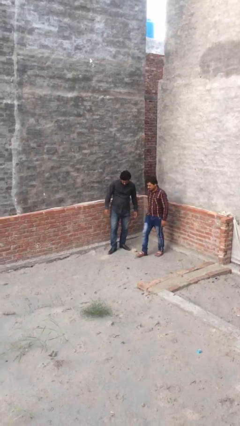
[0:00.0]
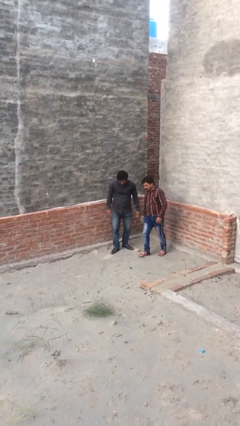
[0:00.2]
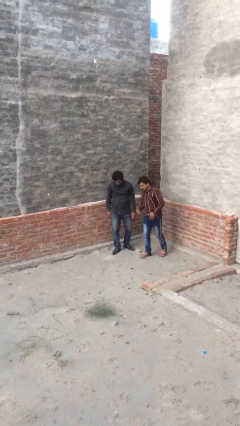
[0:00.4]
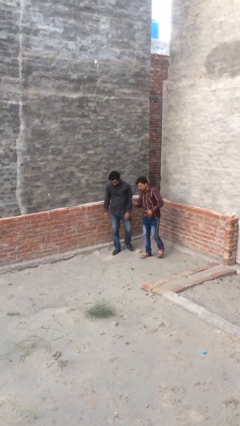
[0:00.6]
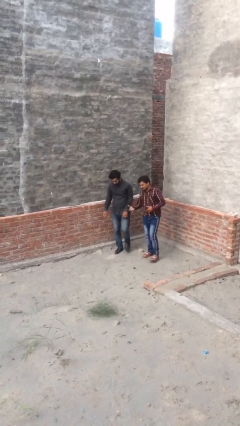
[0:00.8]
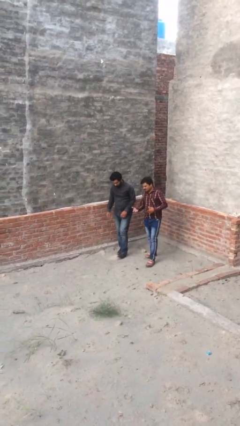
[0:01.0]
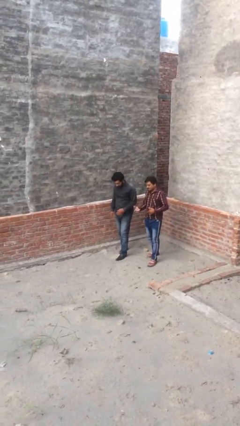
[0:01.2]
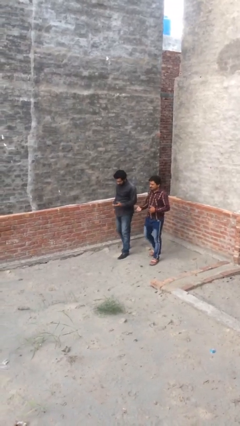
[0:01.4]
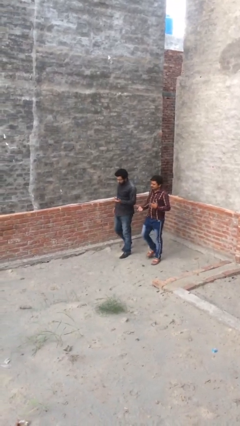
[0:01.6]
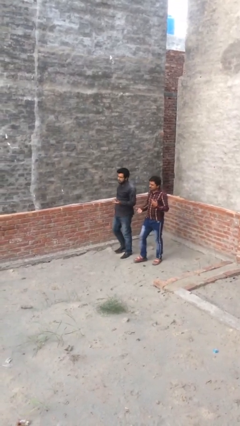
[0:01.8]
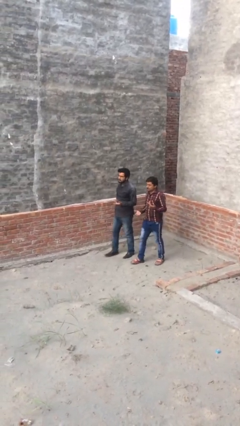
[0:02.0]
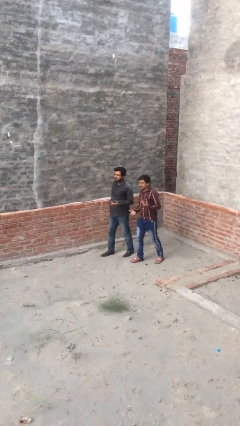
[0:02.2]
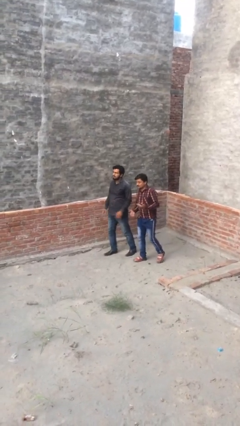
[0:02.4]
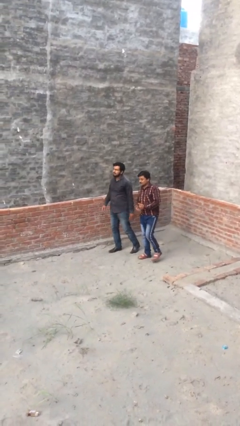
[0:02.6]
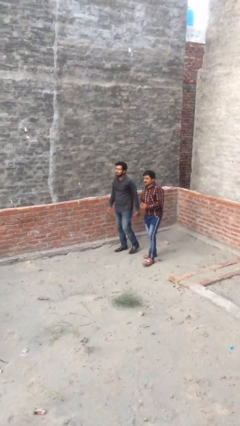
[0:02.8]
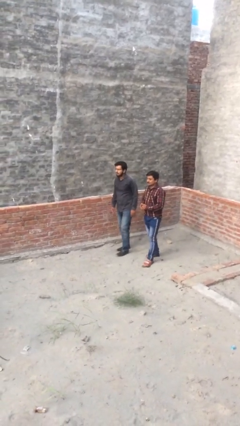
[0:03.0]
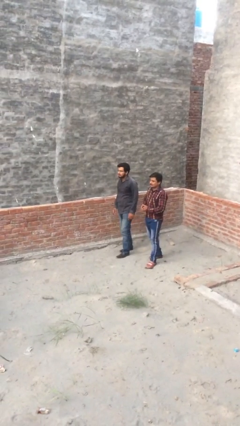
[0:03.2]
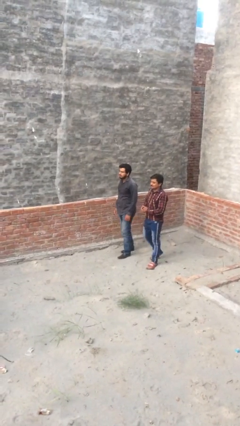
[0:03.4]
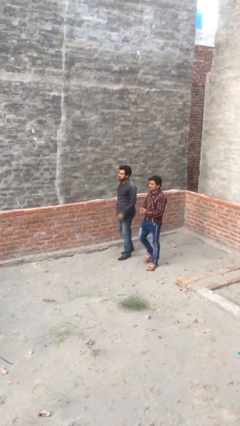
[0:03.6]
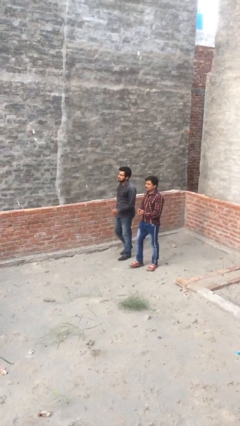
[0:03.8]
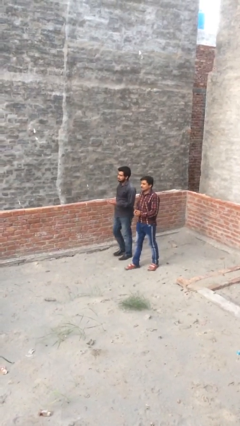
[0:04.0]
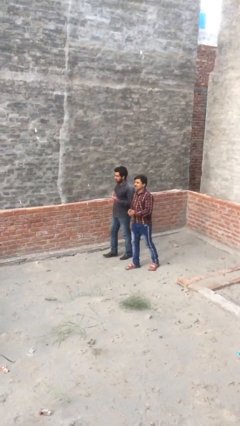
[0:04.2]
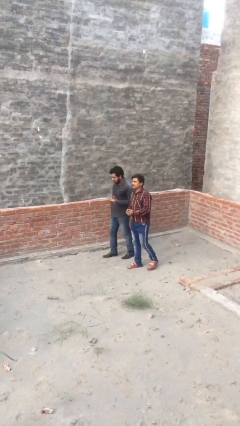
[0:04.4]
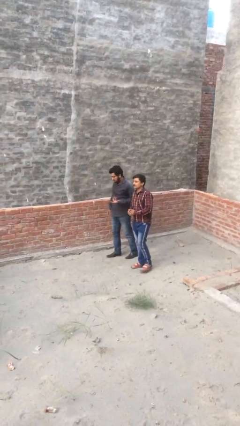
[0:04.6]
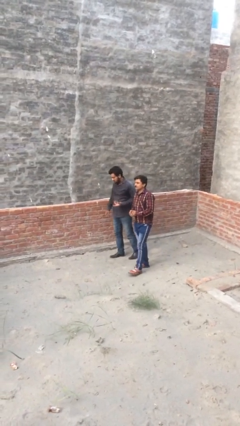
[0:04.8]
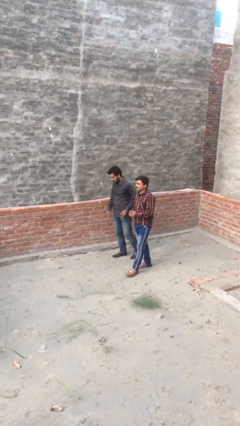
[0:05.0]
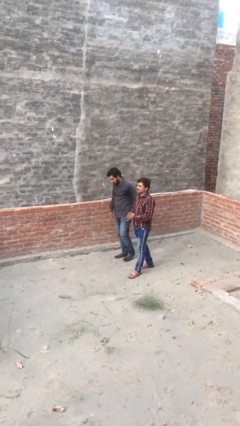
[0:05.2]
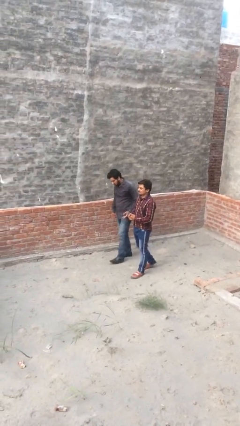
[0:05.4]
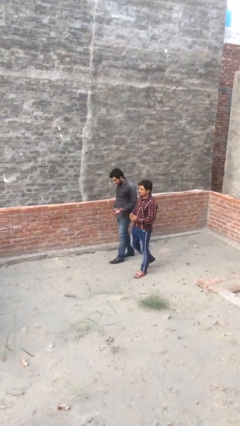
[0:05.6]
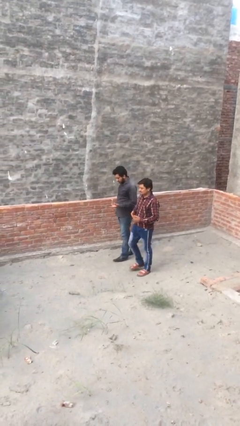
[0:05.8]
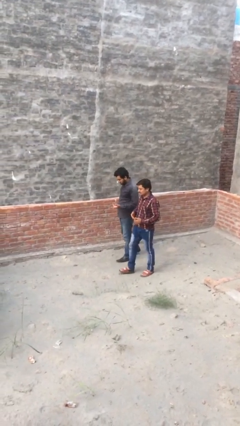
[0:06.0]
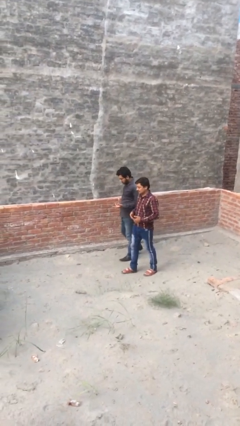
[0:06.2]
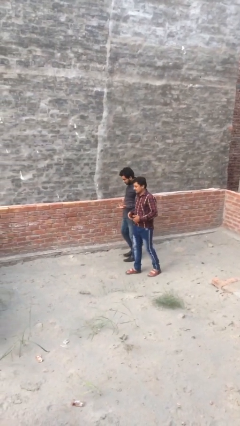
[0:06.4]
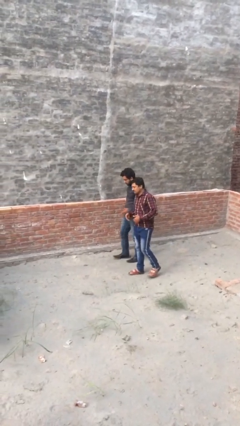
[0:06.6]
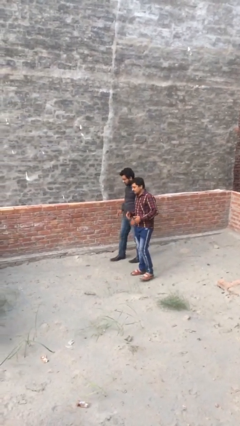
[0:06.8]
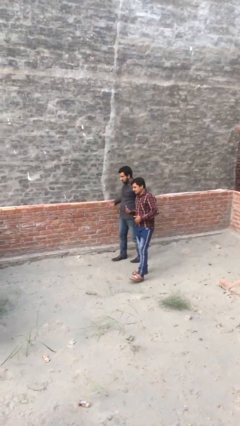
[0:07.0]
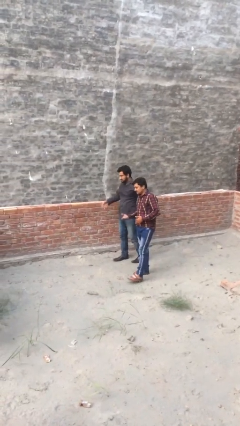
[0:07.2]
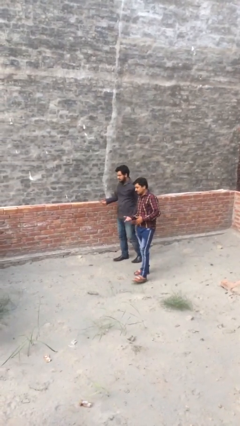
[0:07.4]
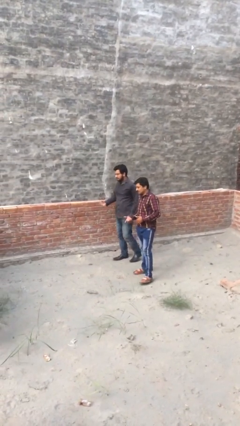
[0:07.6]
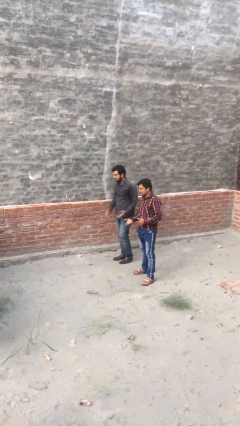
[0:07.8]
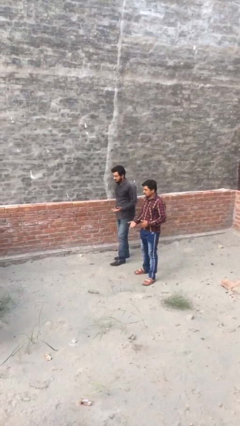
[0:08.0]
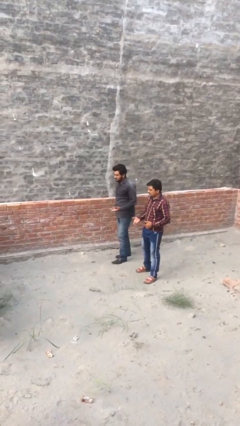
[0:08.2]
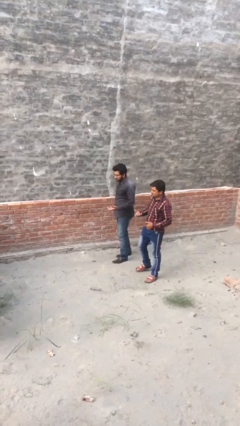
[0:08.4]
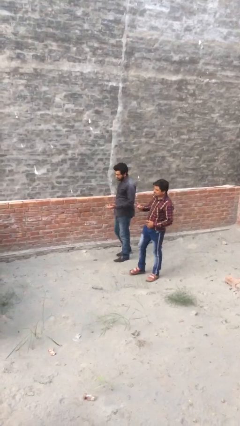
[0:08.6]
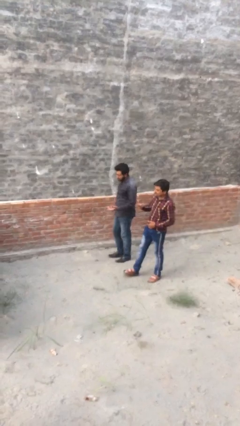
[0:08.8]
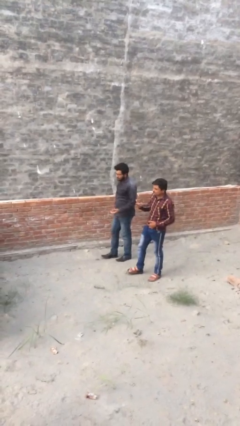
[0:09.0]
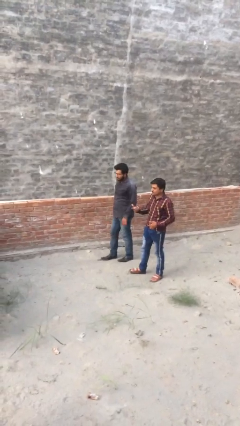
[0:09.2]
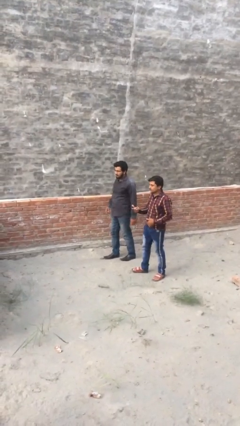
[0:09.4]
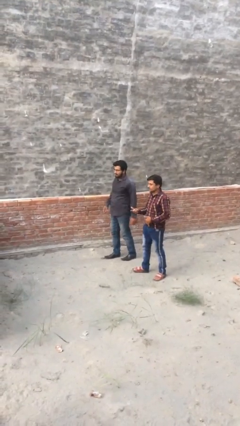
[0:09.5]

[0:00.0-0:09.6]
person talks to person

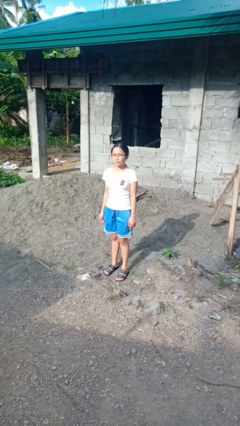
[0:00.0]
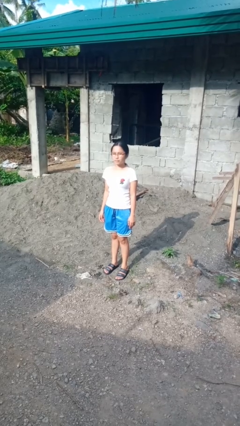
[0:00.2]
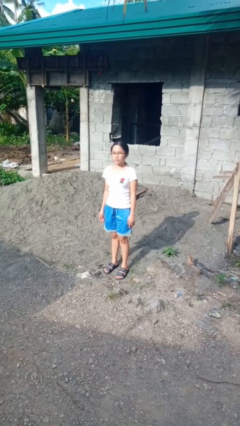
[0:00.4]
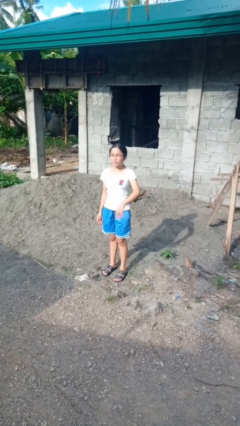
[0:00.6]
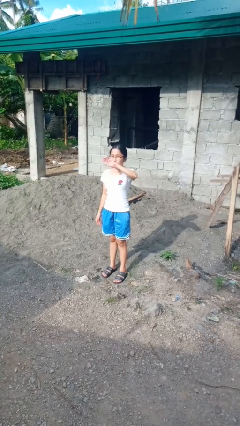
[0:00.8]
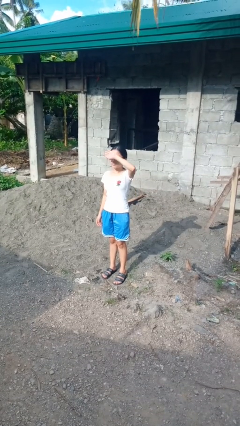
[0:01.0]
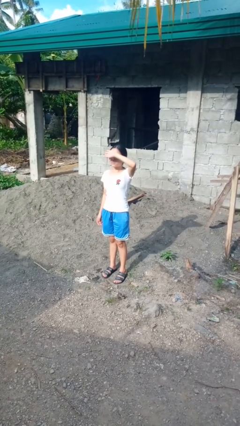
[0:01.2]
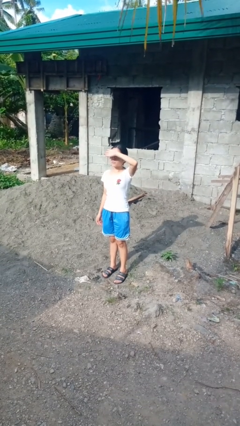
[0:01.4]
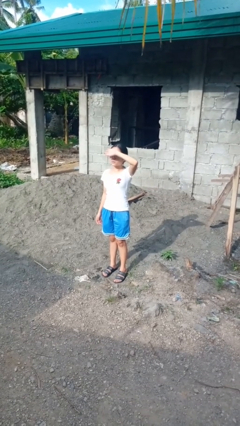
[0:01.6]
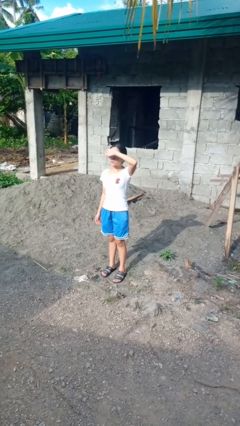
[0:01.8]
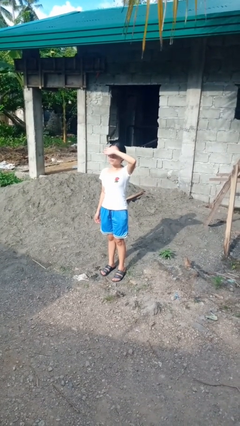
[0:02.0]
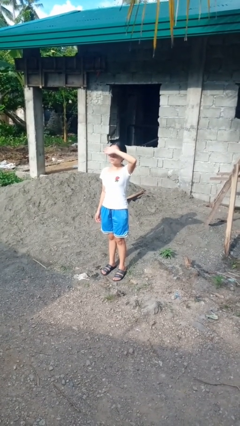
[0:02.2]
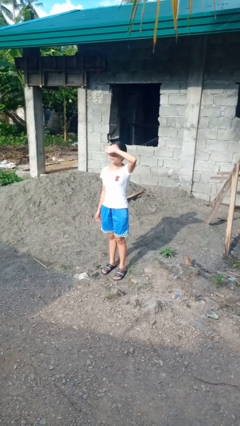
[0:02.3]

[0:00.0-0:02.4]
person shades eyes

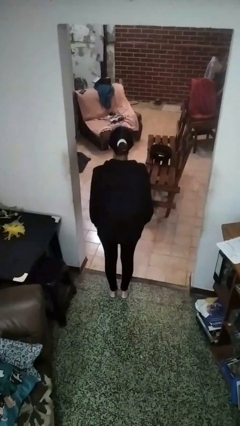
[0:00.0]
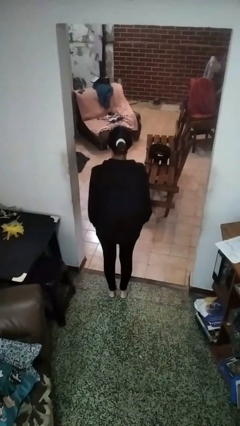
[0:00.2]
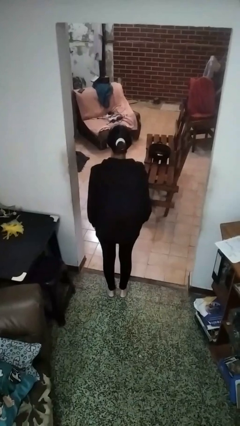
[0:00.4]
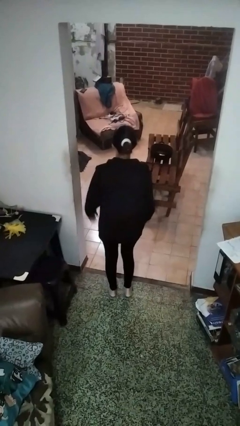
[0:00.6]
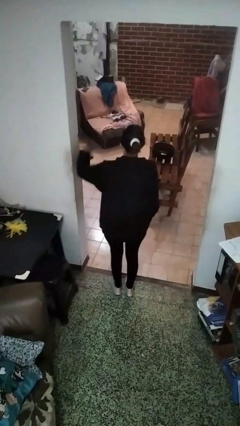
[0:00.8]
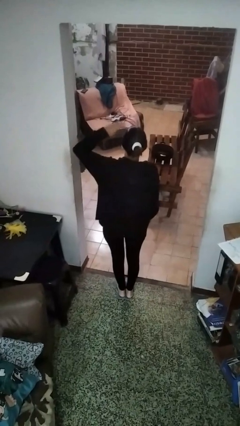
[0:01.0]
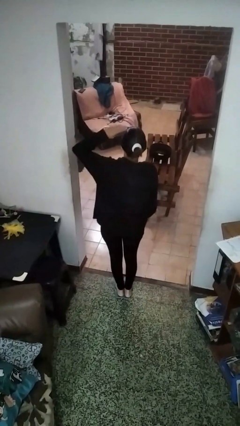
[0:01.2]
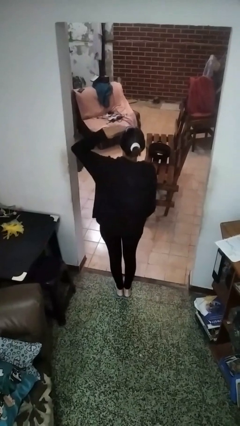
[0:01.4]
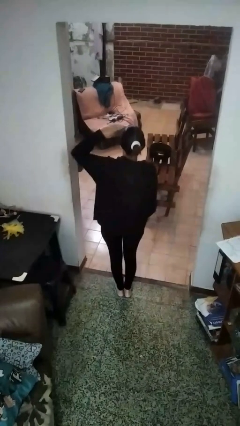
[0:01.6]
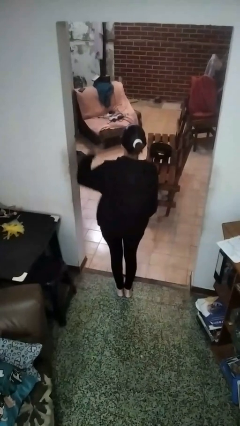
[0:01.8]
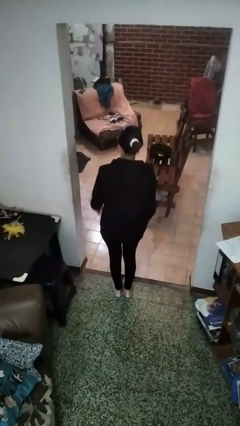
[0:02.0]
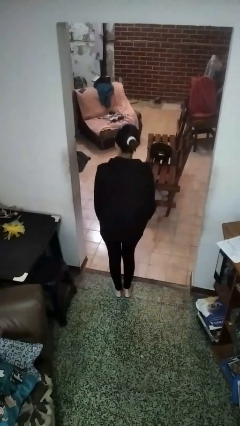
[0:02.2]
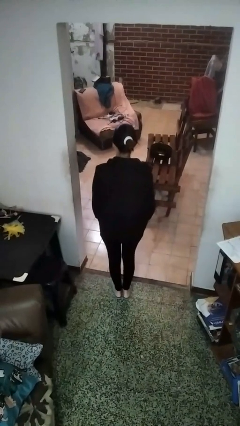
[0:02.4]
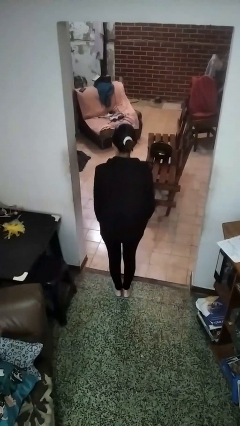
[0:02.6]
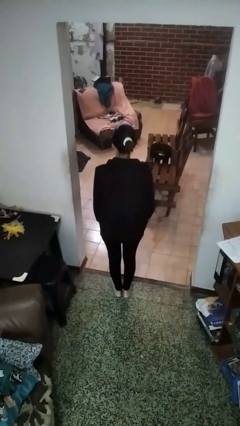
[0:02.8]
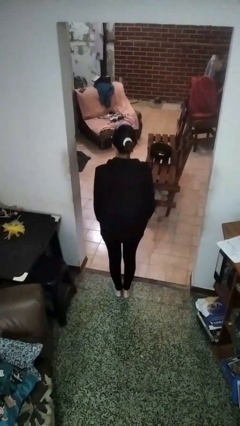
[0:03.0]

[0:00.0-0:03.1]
person salutes

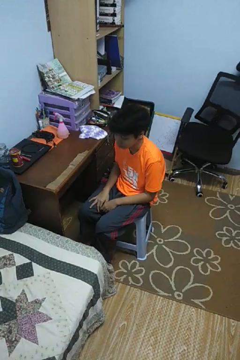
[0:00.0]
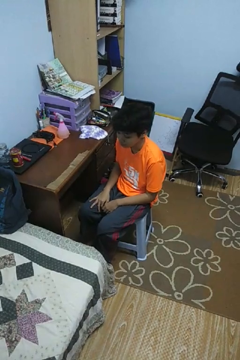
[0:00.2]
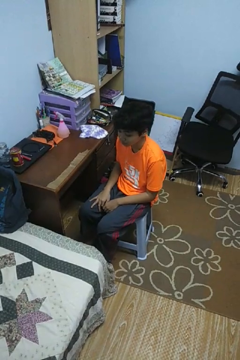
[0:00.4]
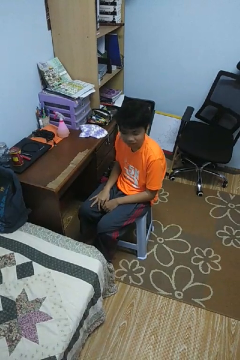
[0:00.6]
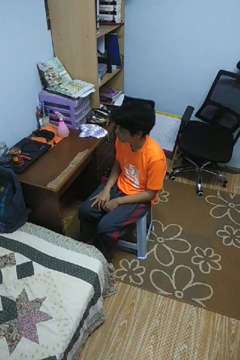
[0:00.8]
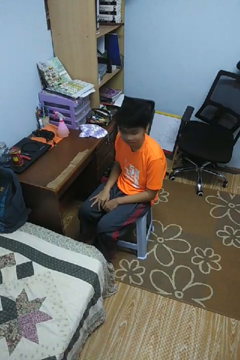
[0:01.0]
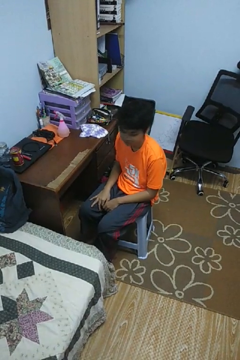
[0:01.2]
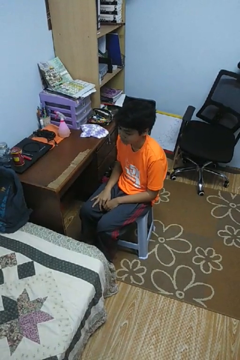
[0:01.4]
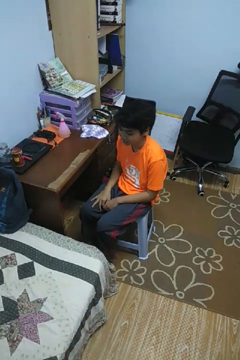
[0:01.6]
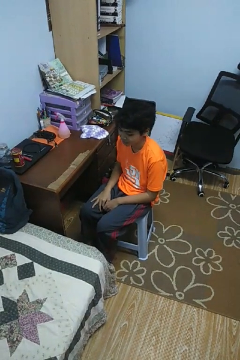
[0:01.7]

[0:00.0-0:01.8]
person shakes head

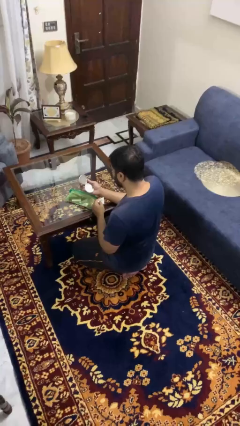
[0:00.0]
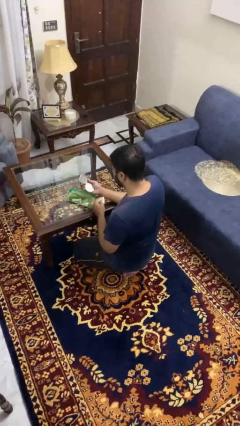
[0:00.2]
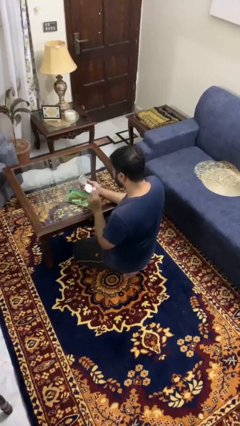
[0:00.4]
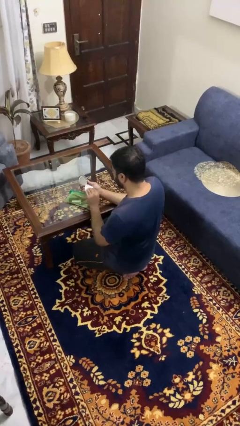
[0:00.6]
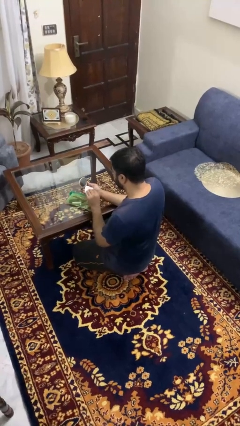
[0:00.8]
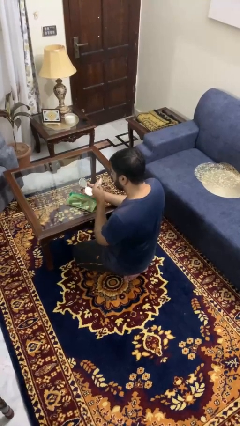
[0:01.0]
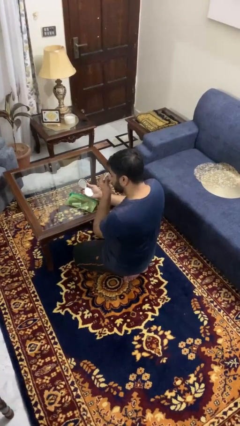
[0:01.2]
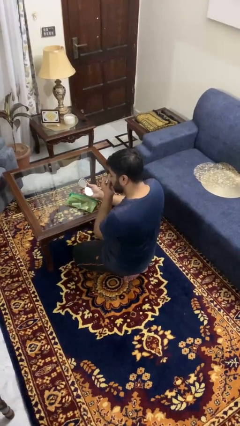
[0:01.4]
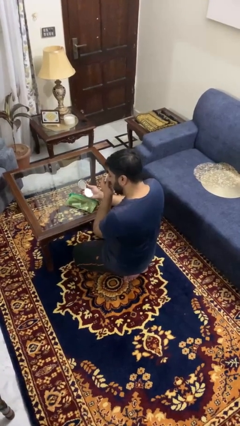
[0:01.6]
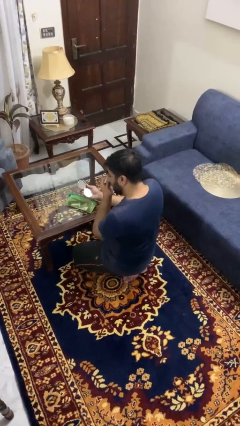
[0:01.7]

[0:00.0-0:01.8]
person applies foundation makeup
